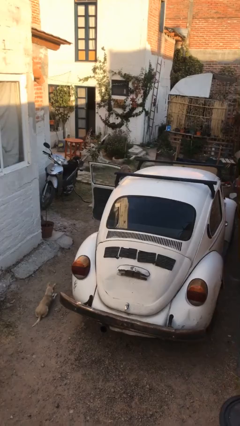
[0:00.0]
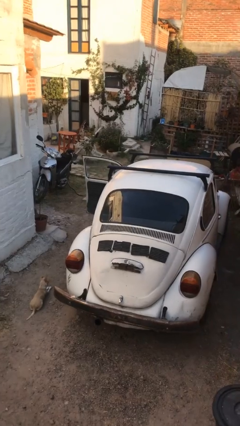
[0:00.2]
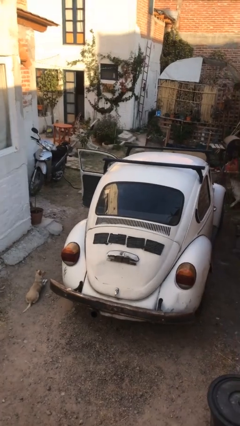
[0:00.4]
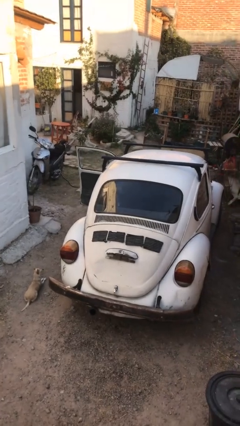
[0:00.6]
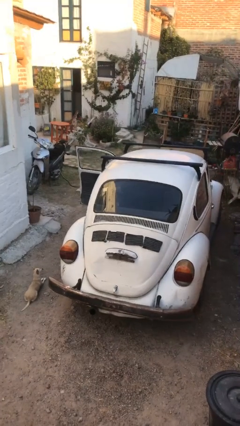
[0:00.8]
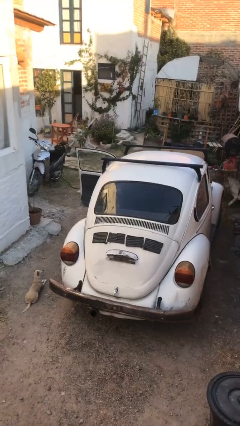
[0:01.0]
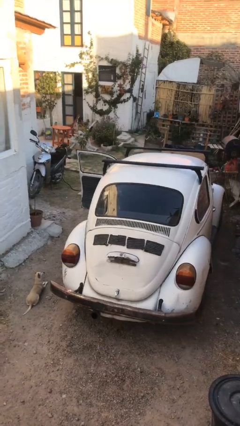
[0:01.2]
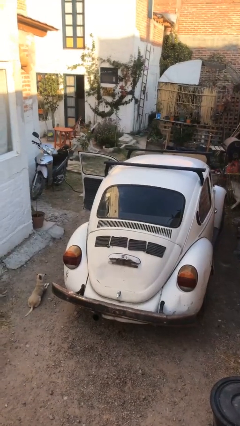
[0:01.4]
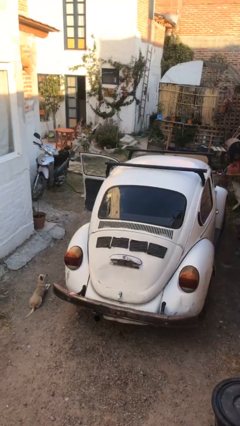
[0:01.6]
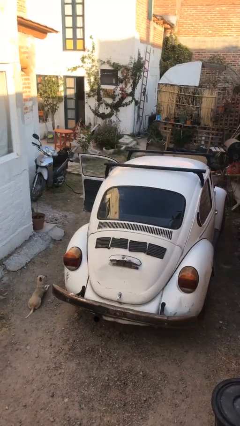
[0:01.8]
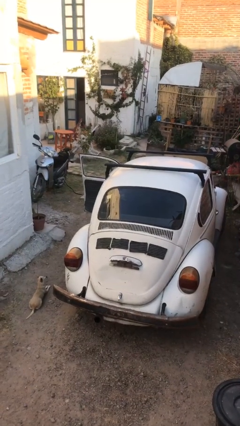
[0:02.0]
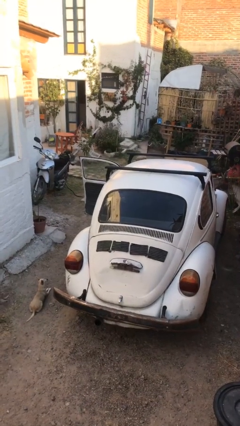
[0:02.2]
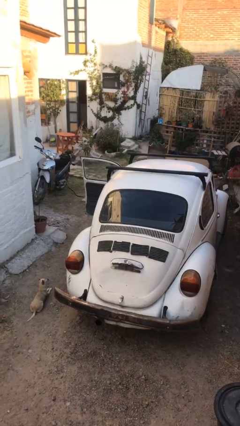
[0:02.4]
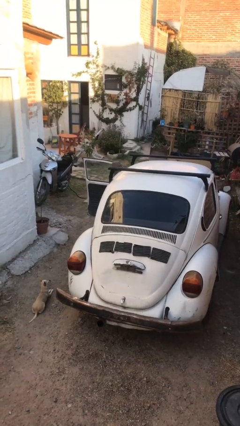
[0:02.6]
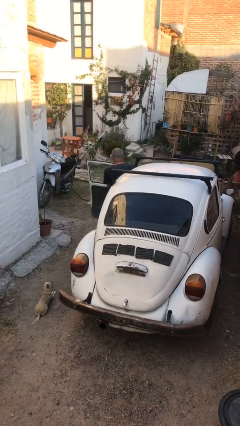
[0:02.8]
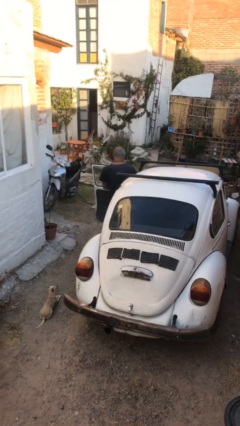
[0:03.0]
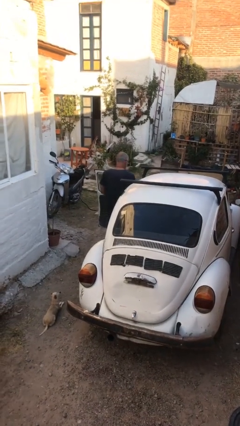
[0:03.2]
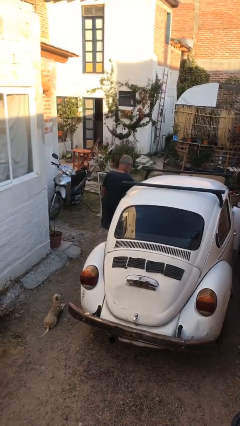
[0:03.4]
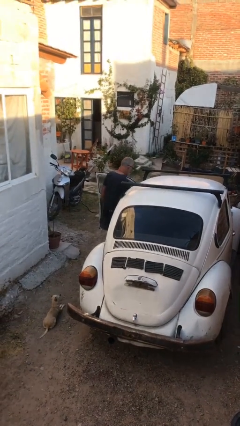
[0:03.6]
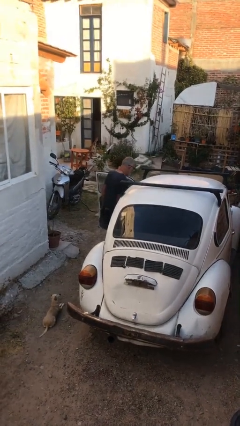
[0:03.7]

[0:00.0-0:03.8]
person enters car

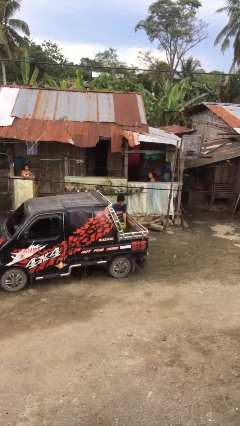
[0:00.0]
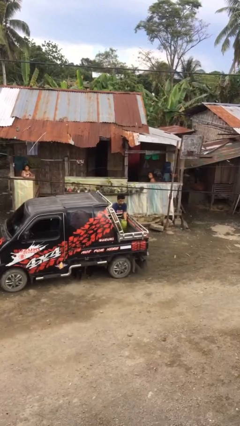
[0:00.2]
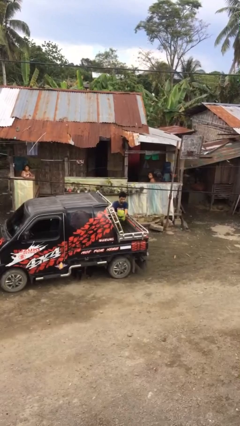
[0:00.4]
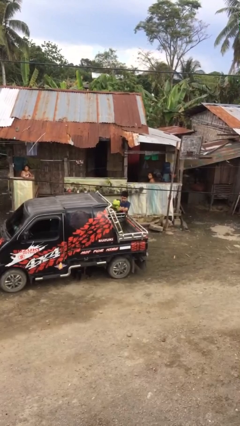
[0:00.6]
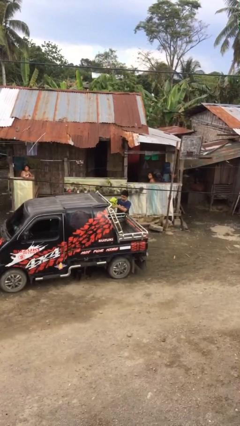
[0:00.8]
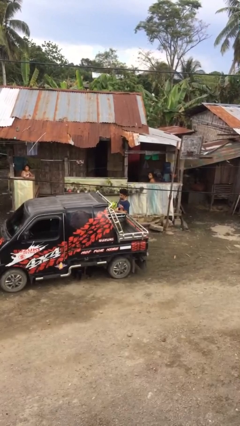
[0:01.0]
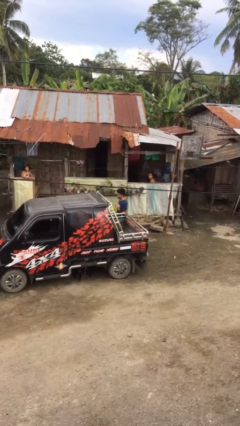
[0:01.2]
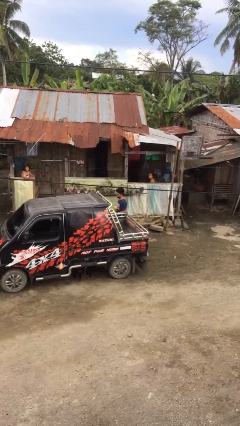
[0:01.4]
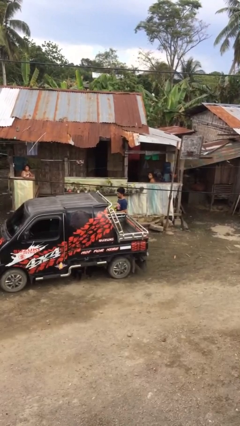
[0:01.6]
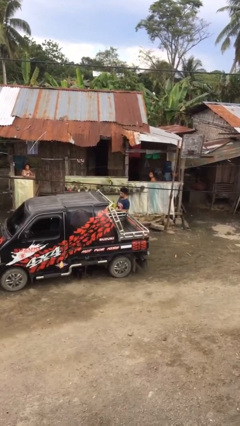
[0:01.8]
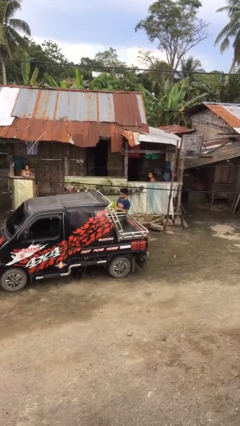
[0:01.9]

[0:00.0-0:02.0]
person unloads car

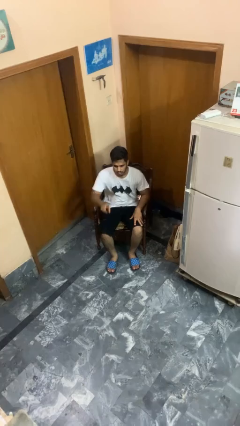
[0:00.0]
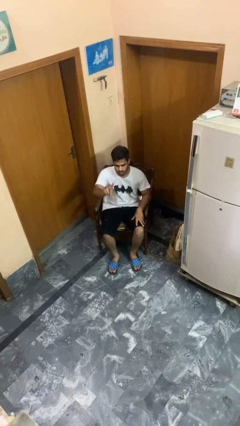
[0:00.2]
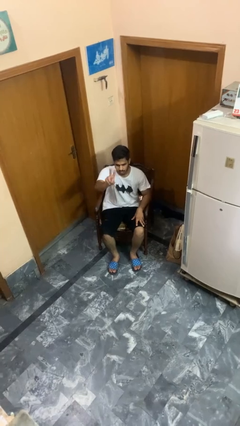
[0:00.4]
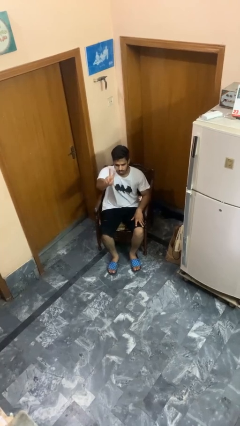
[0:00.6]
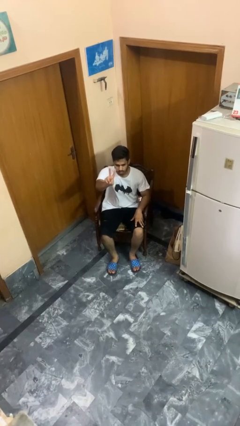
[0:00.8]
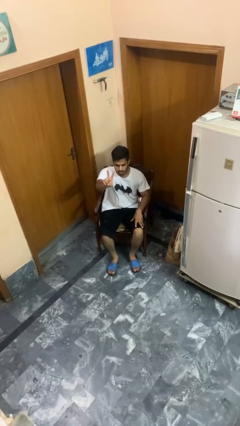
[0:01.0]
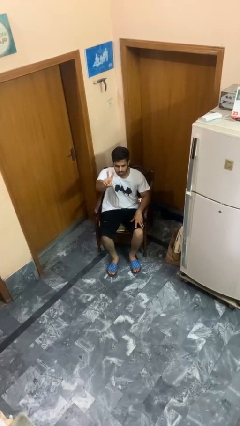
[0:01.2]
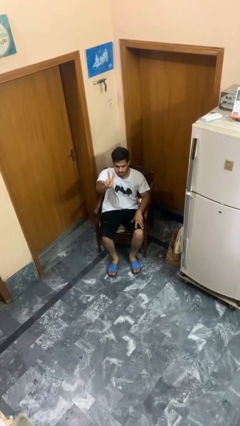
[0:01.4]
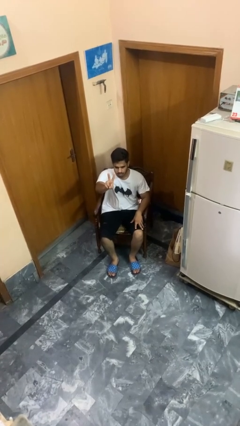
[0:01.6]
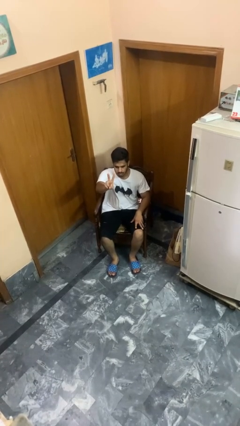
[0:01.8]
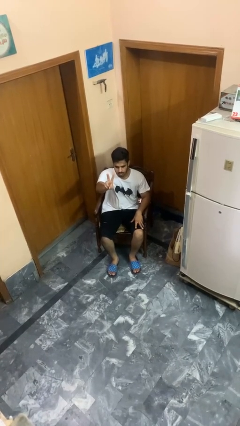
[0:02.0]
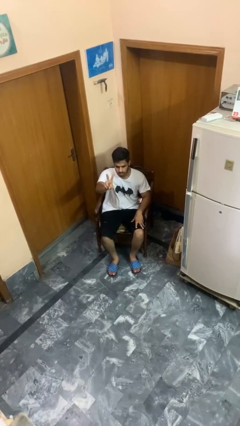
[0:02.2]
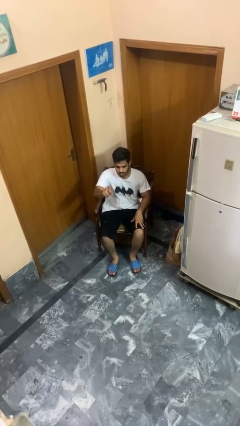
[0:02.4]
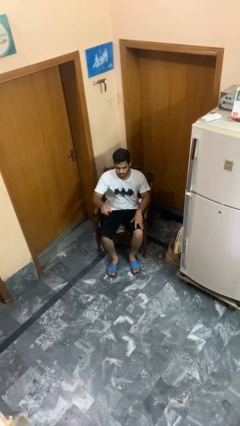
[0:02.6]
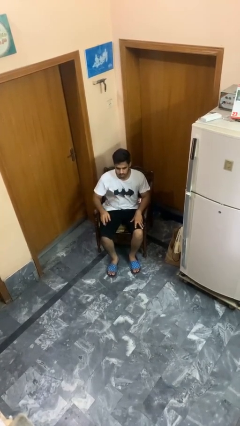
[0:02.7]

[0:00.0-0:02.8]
person gestures peace

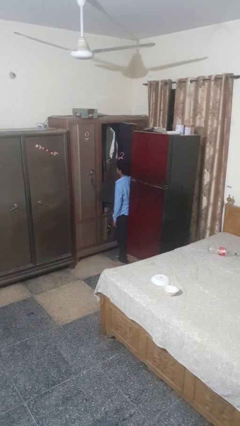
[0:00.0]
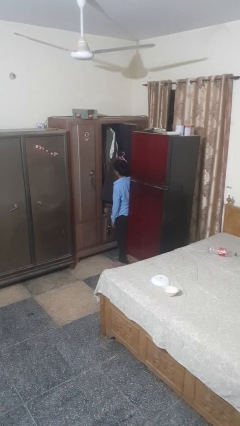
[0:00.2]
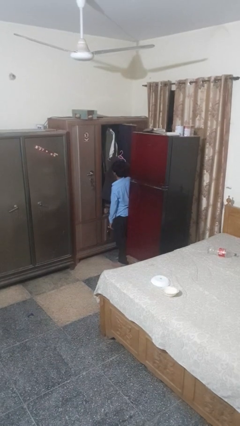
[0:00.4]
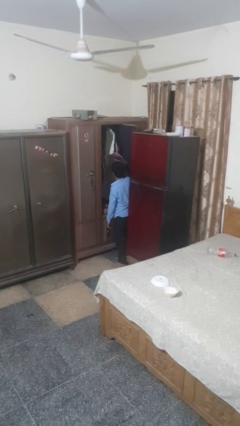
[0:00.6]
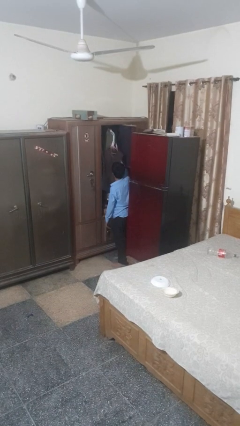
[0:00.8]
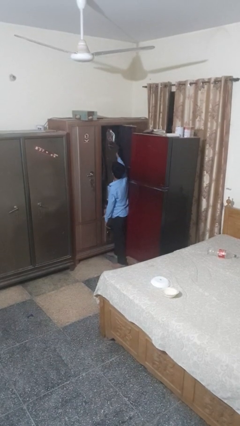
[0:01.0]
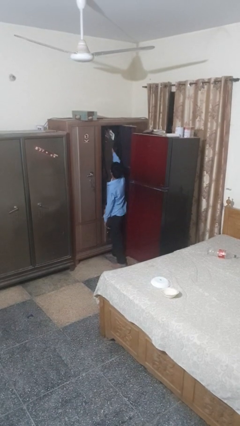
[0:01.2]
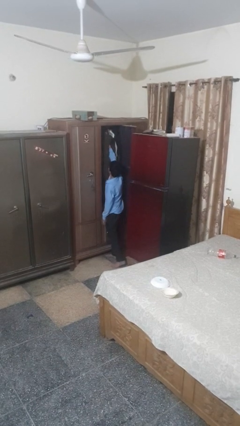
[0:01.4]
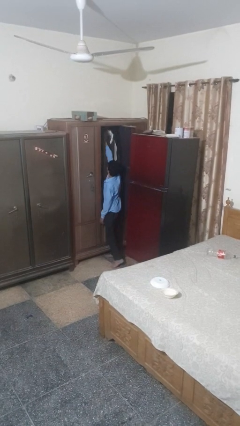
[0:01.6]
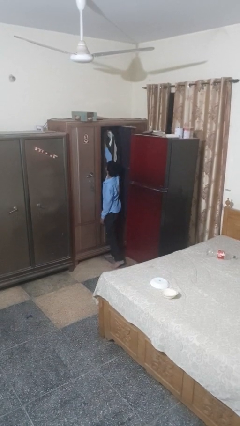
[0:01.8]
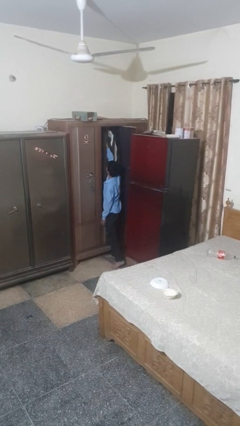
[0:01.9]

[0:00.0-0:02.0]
person puts clothes into closet

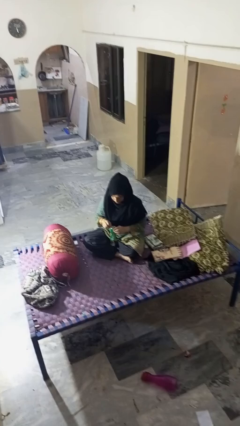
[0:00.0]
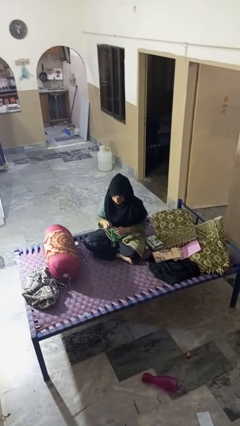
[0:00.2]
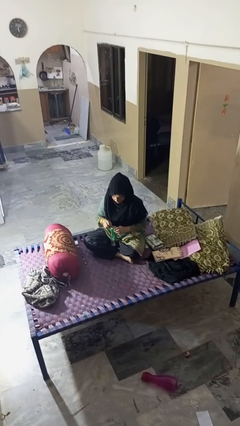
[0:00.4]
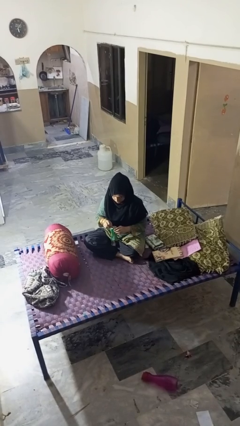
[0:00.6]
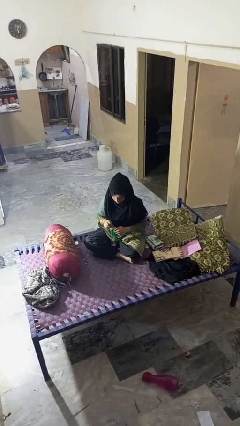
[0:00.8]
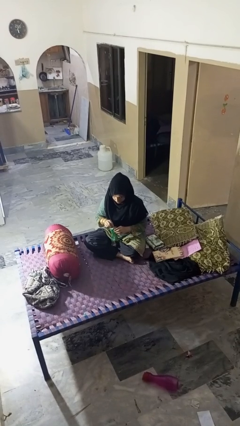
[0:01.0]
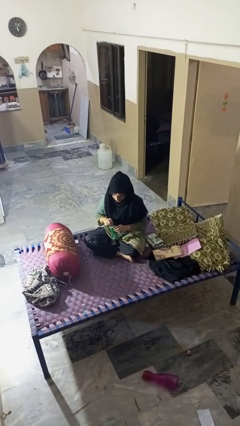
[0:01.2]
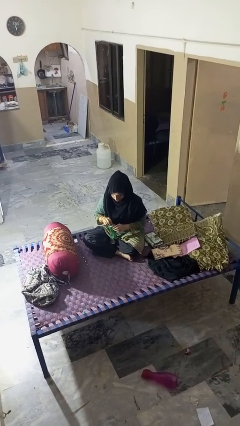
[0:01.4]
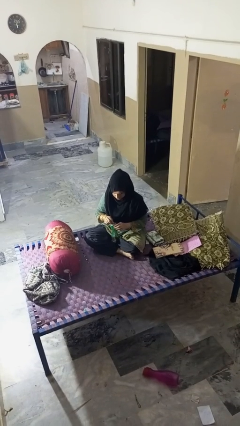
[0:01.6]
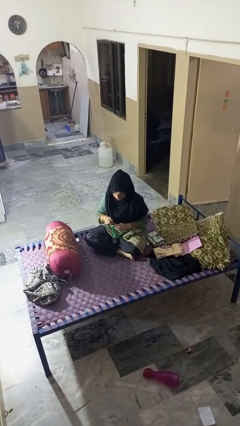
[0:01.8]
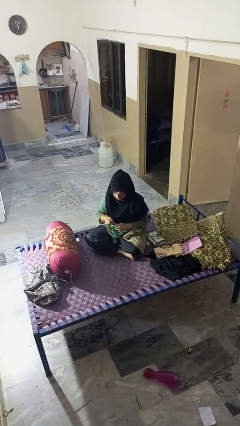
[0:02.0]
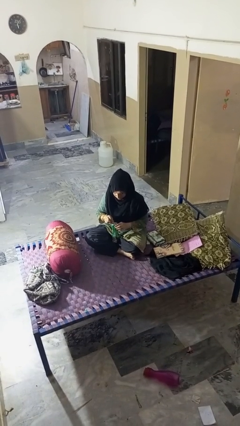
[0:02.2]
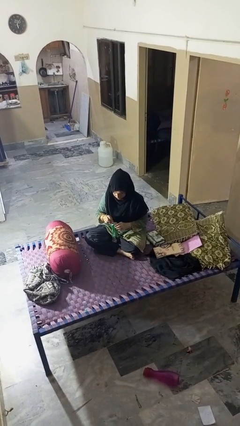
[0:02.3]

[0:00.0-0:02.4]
person opens can with can opener

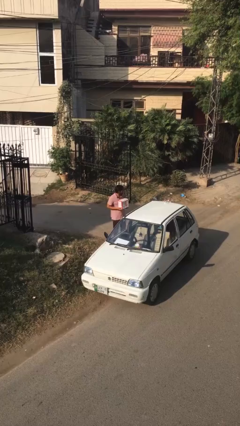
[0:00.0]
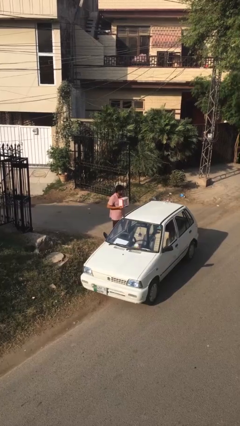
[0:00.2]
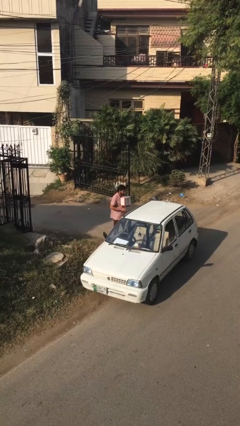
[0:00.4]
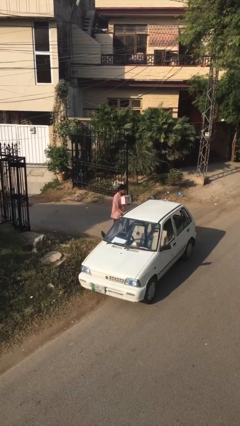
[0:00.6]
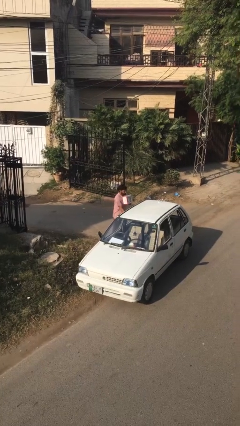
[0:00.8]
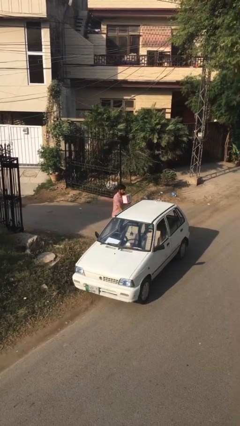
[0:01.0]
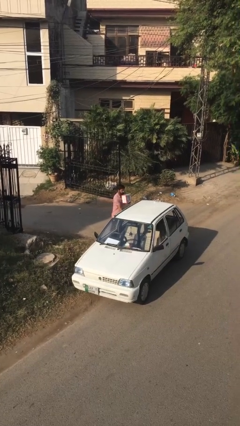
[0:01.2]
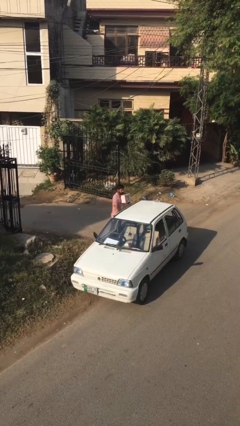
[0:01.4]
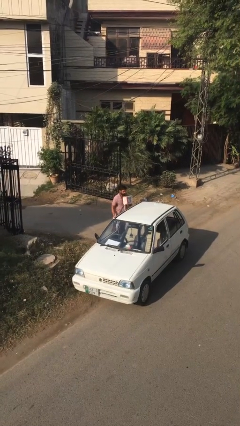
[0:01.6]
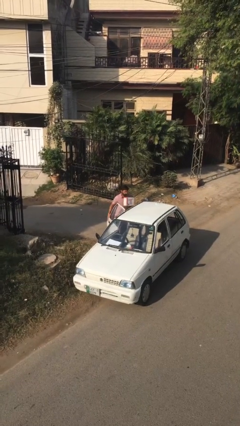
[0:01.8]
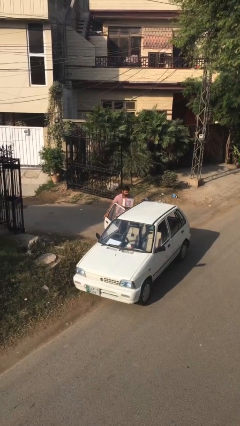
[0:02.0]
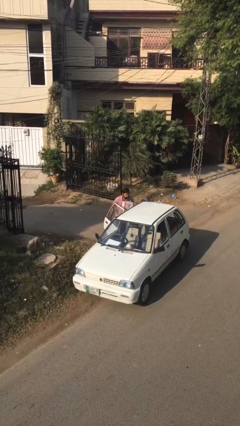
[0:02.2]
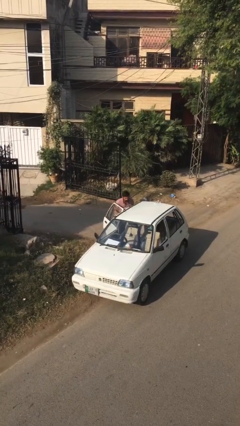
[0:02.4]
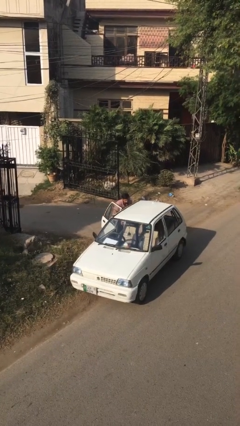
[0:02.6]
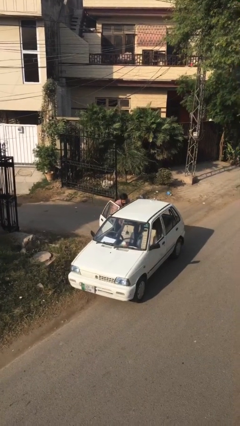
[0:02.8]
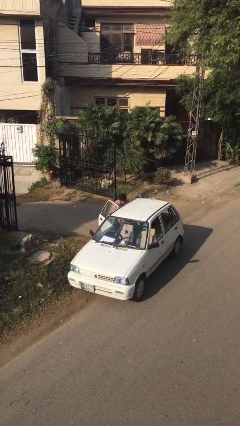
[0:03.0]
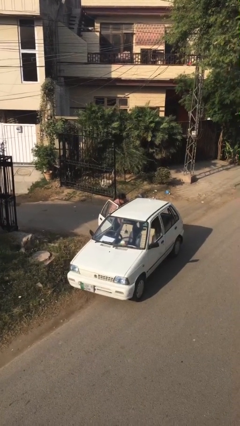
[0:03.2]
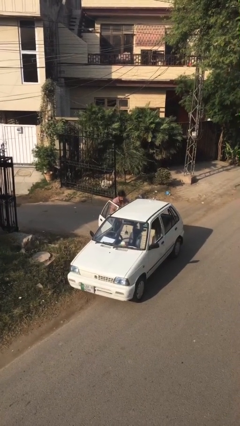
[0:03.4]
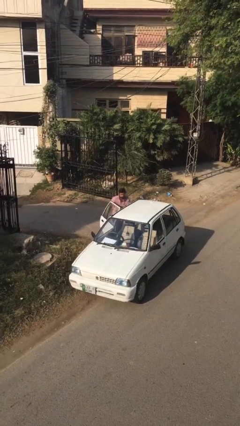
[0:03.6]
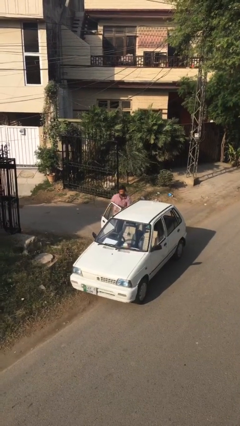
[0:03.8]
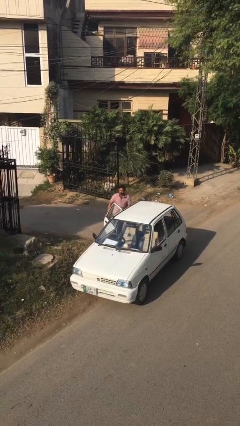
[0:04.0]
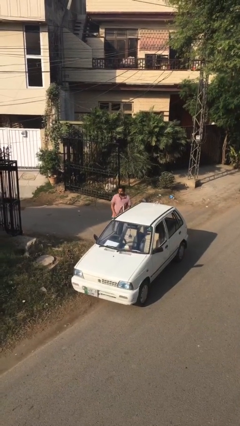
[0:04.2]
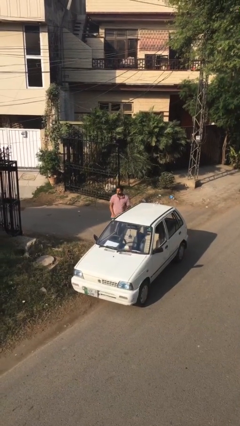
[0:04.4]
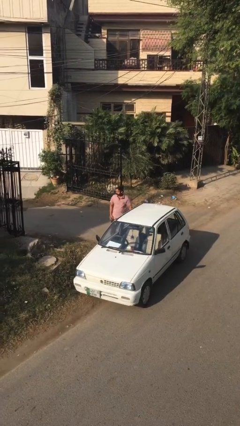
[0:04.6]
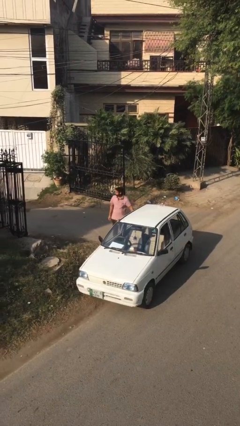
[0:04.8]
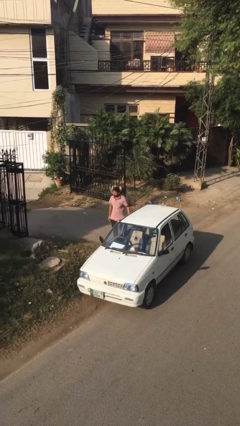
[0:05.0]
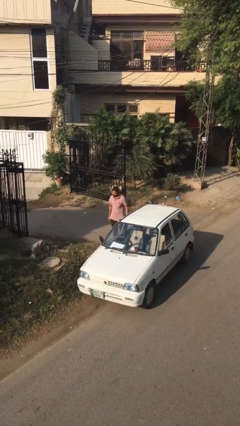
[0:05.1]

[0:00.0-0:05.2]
person loads car
